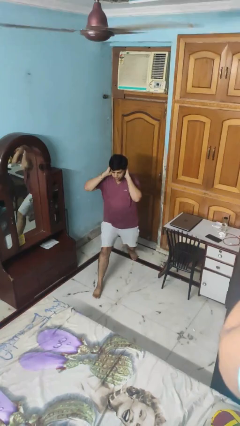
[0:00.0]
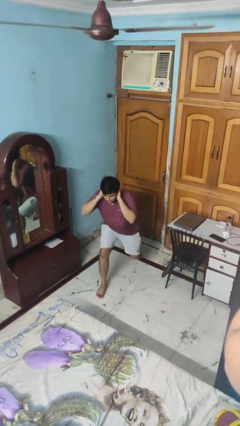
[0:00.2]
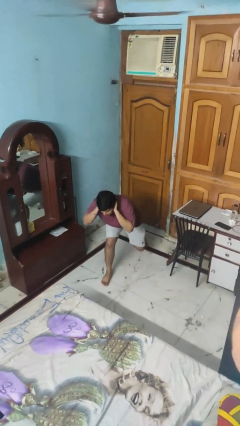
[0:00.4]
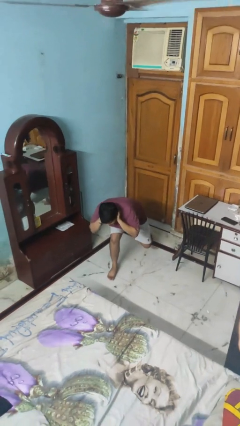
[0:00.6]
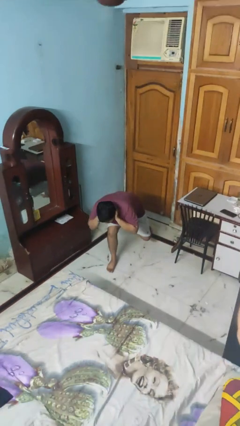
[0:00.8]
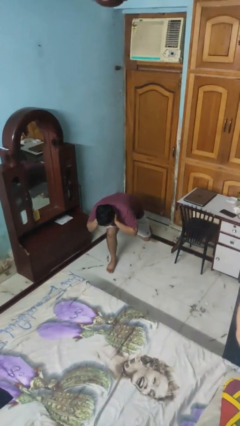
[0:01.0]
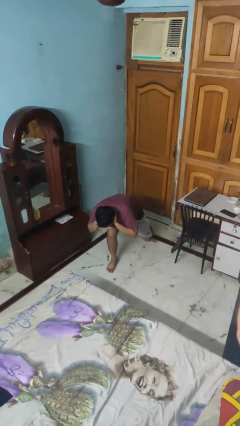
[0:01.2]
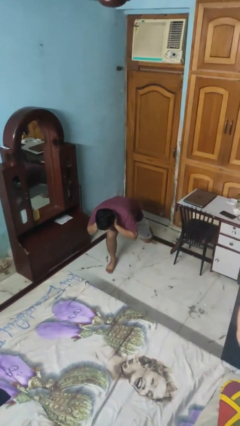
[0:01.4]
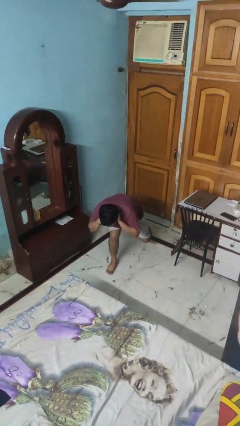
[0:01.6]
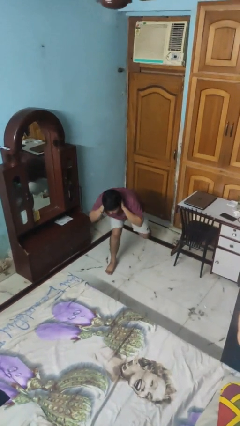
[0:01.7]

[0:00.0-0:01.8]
person exercises with lunges

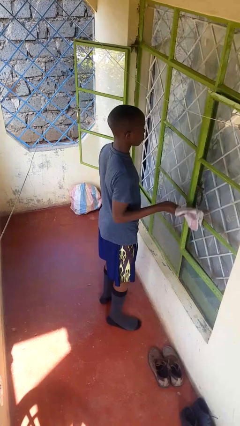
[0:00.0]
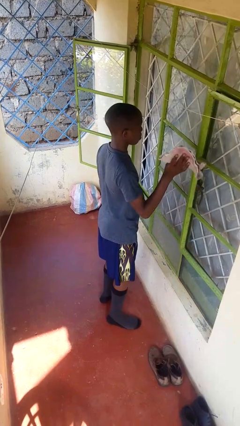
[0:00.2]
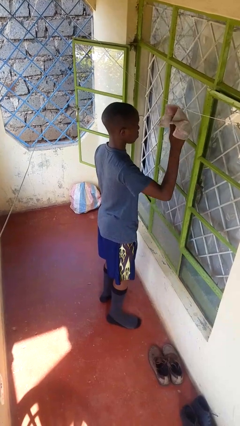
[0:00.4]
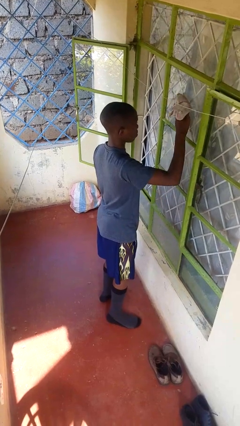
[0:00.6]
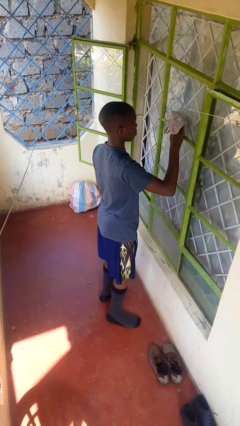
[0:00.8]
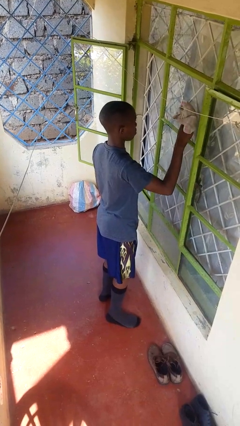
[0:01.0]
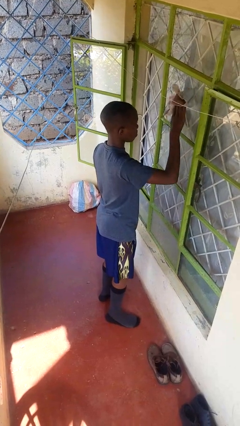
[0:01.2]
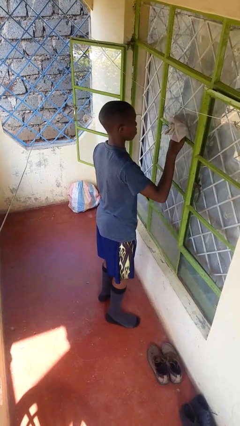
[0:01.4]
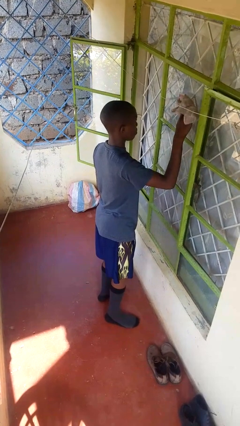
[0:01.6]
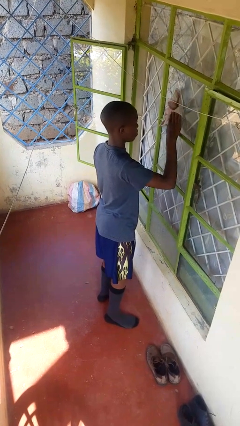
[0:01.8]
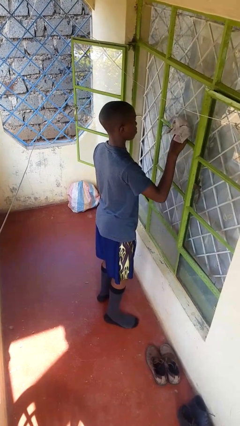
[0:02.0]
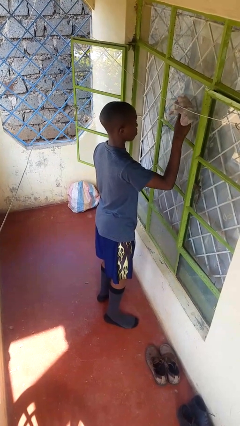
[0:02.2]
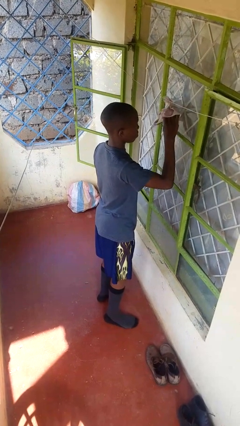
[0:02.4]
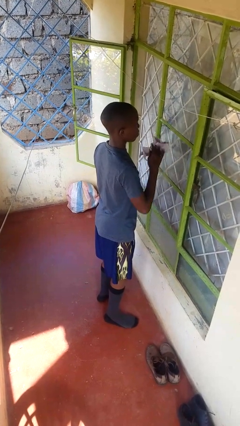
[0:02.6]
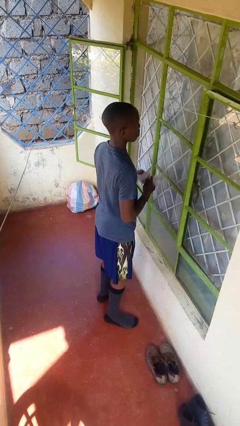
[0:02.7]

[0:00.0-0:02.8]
person washes window

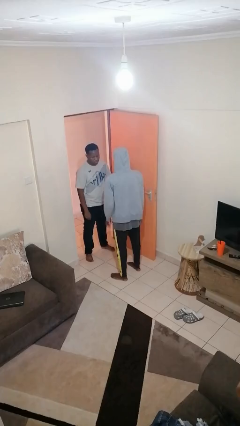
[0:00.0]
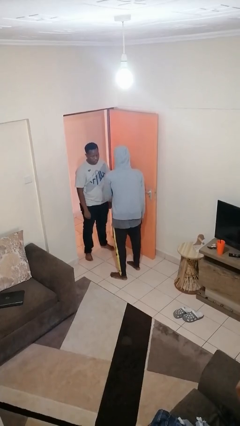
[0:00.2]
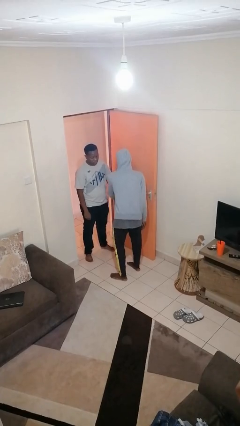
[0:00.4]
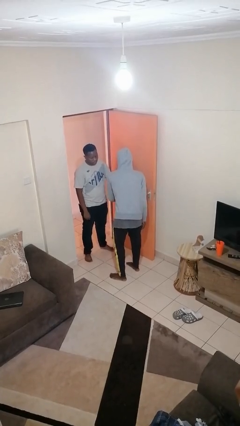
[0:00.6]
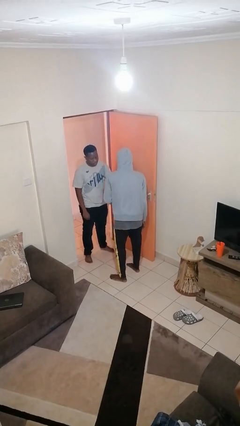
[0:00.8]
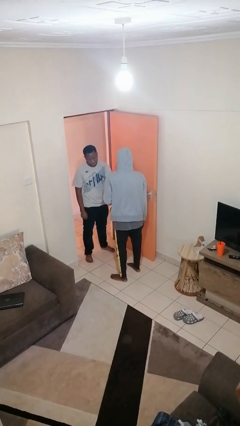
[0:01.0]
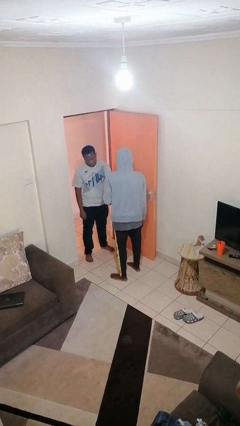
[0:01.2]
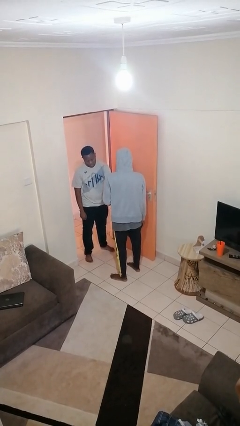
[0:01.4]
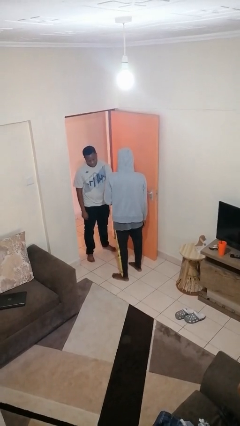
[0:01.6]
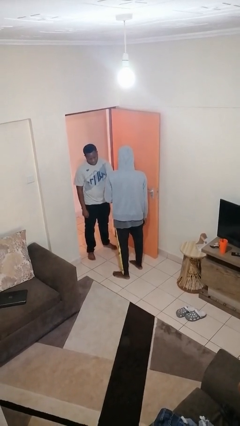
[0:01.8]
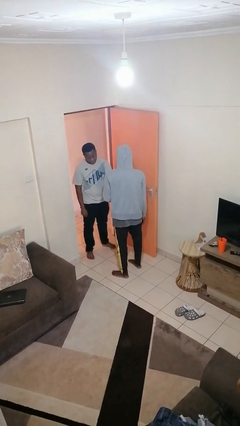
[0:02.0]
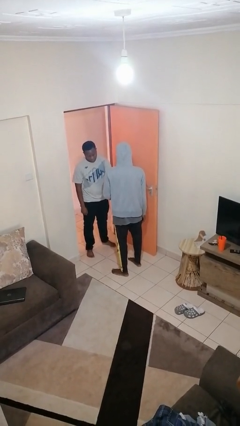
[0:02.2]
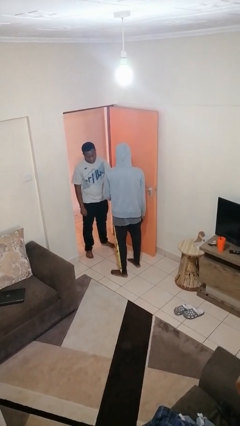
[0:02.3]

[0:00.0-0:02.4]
person grabs person by forearm

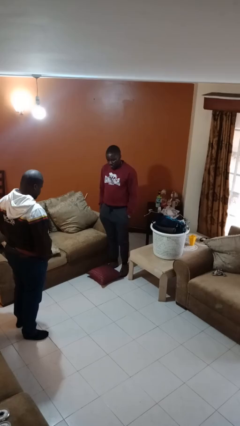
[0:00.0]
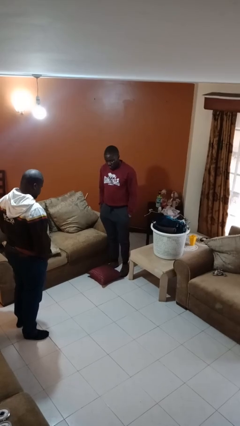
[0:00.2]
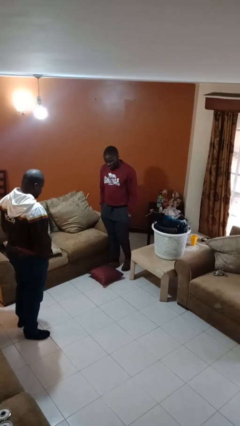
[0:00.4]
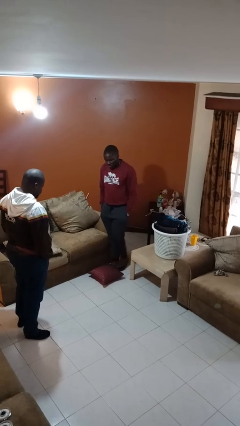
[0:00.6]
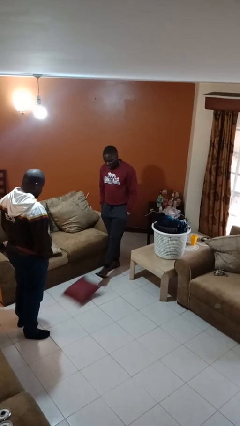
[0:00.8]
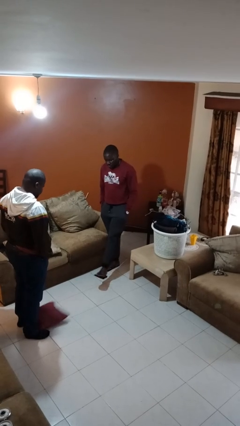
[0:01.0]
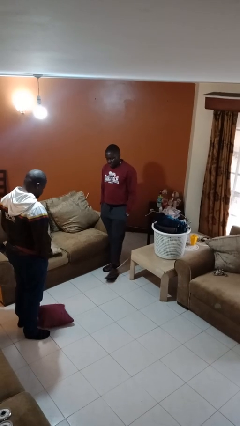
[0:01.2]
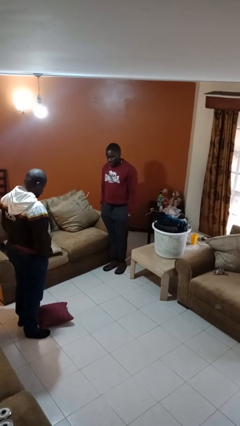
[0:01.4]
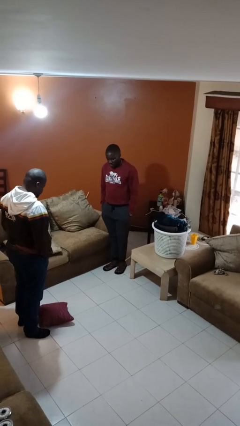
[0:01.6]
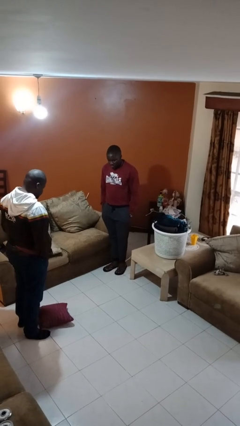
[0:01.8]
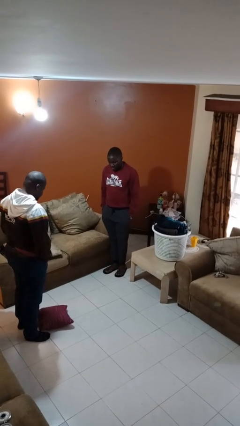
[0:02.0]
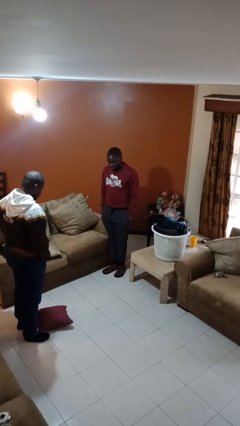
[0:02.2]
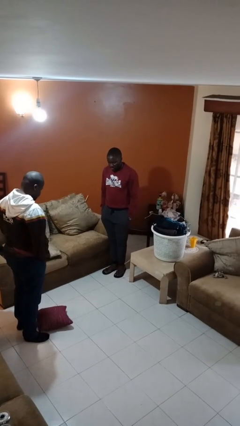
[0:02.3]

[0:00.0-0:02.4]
person kicks object to person

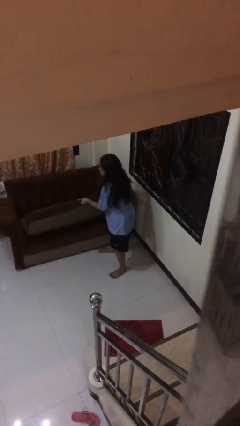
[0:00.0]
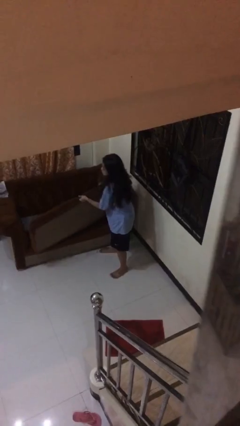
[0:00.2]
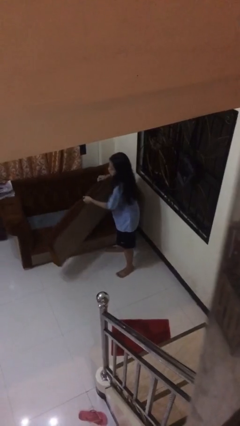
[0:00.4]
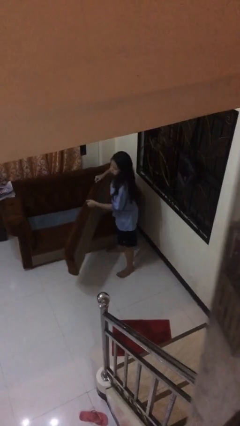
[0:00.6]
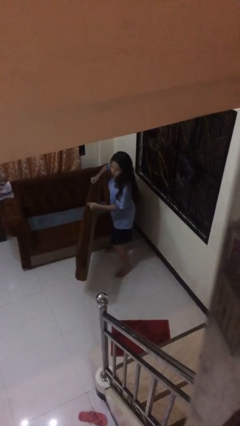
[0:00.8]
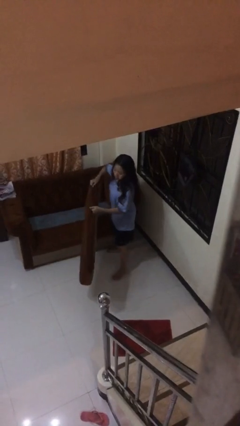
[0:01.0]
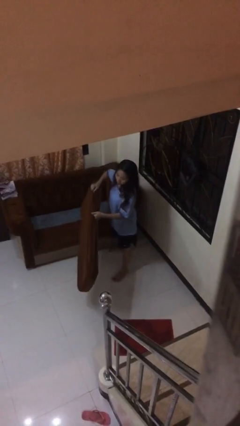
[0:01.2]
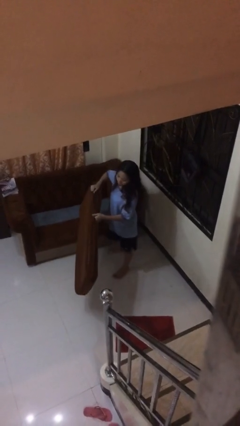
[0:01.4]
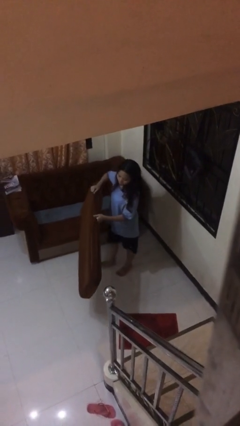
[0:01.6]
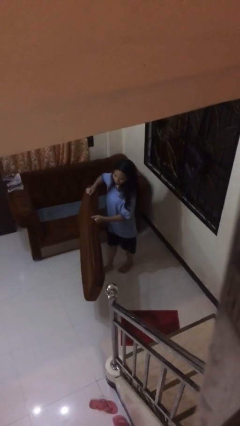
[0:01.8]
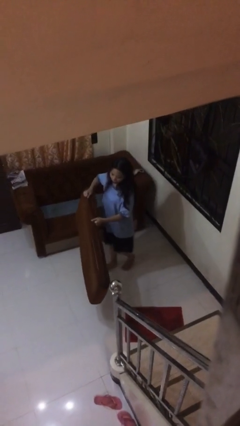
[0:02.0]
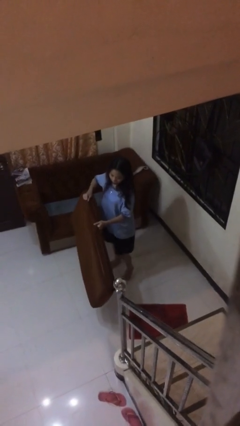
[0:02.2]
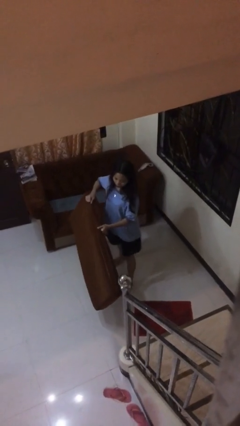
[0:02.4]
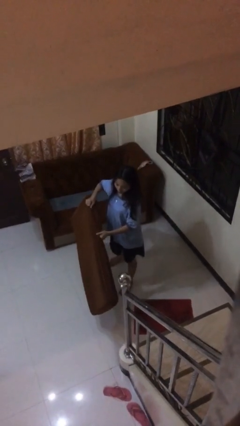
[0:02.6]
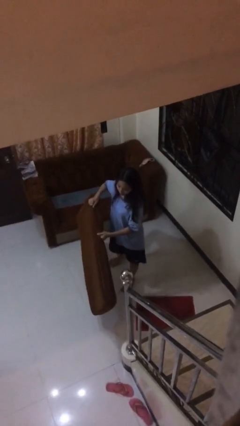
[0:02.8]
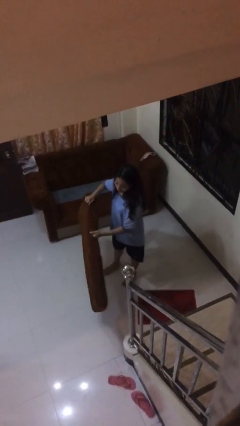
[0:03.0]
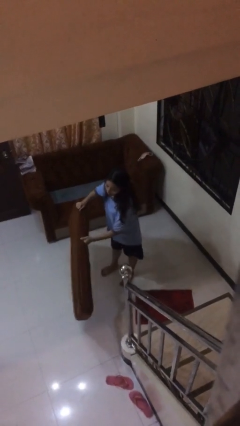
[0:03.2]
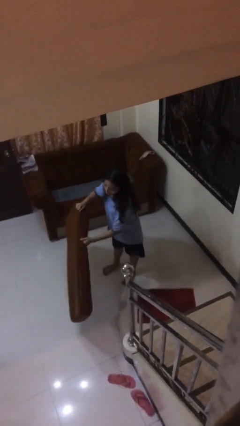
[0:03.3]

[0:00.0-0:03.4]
person carries heavy object

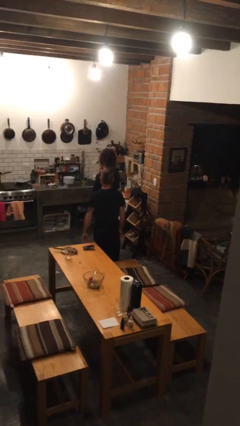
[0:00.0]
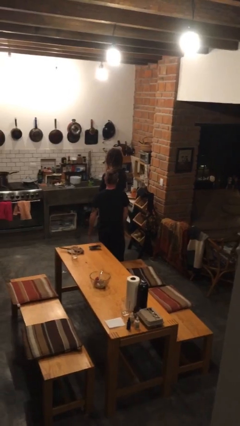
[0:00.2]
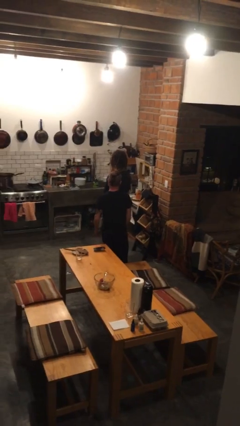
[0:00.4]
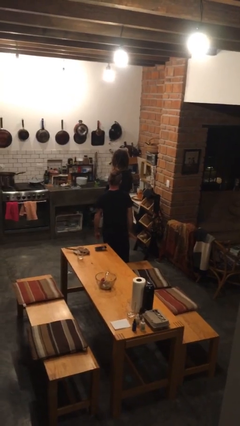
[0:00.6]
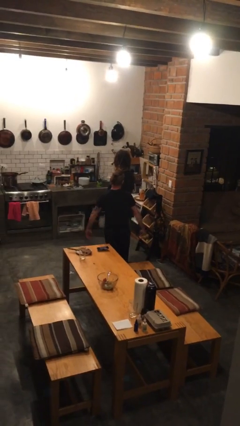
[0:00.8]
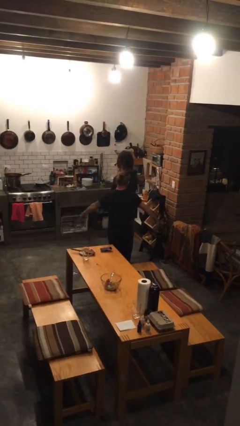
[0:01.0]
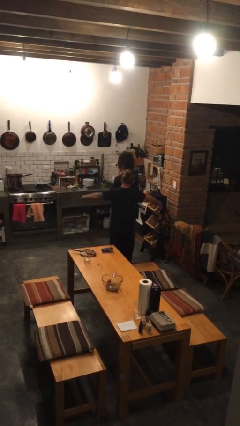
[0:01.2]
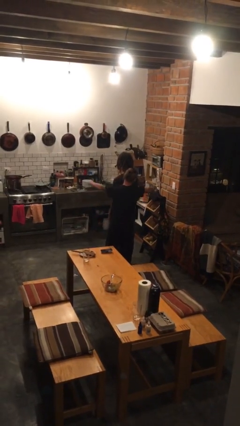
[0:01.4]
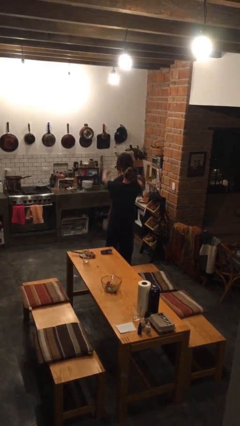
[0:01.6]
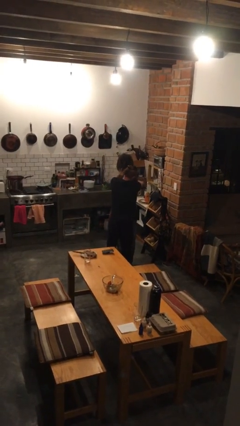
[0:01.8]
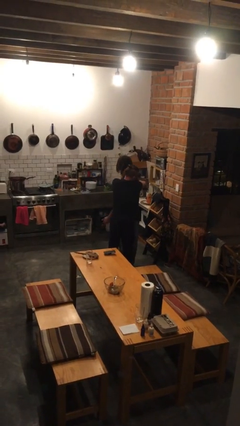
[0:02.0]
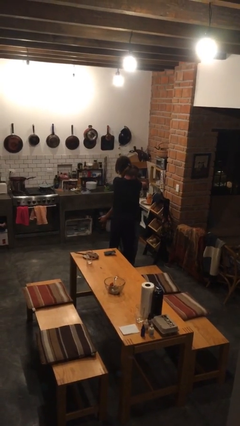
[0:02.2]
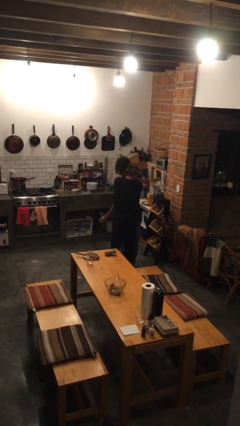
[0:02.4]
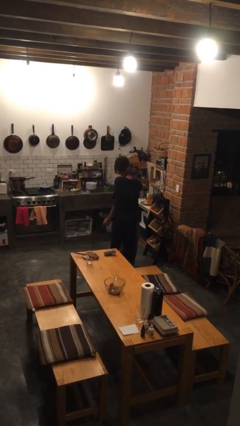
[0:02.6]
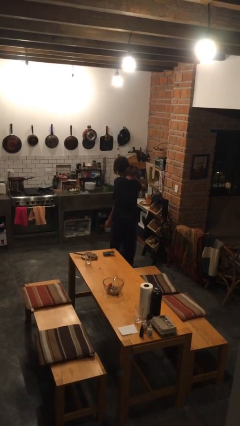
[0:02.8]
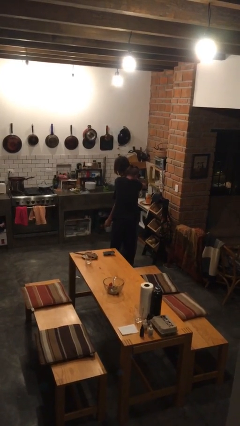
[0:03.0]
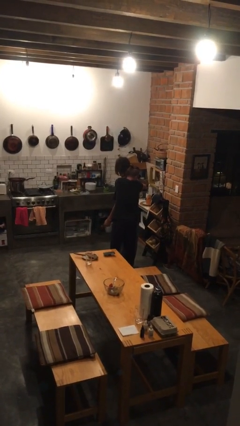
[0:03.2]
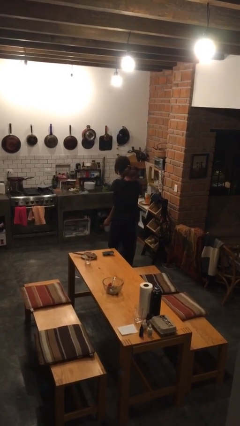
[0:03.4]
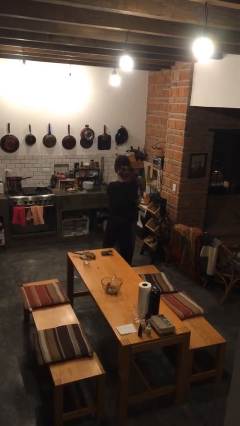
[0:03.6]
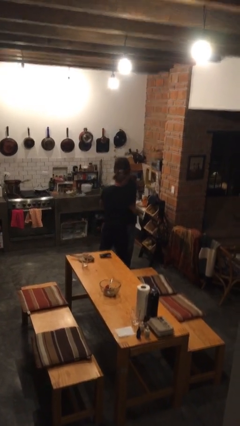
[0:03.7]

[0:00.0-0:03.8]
person hugs person from behind

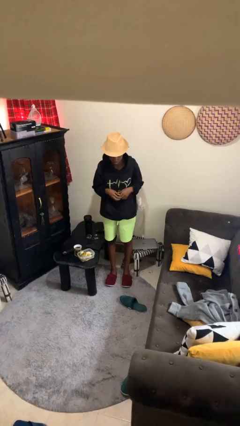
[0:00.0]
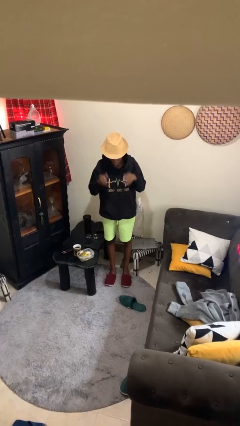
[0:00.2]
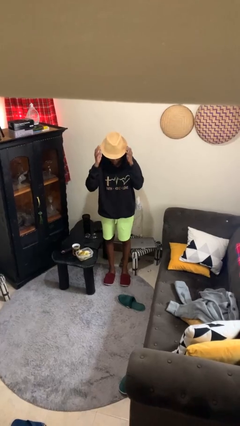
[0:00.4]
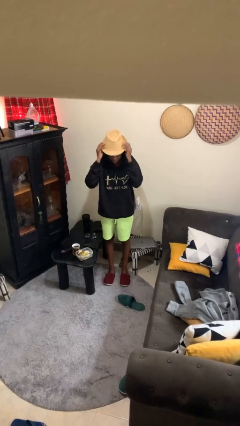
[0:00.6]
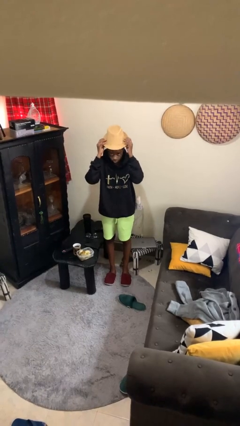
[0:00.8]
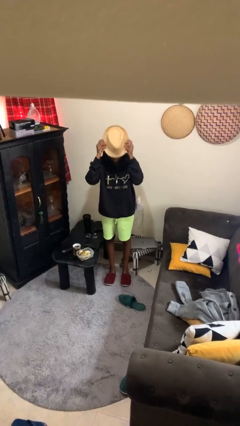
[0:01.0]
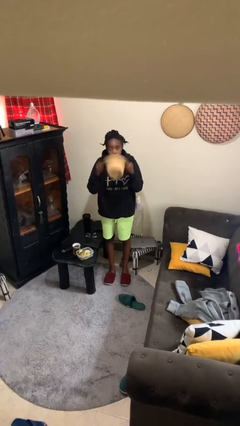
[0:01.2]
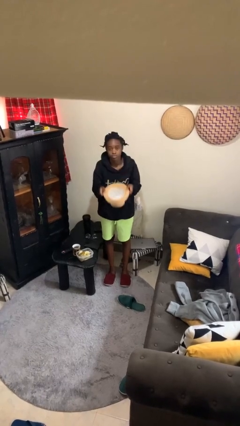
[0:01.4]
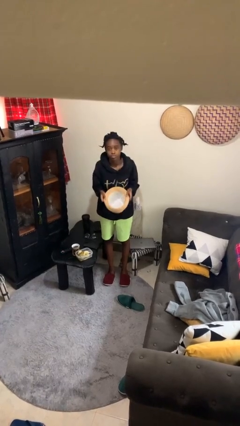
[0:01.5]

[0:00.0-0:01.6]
person takes off hat
